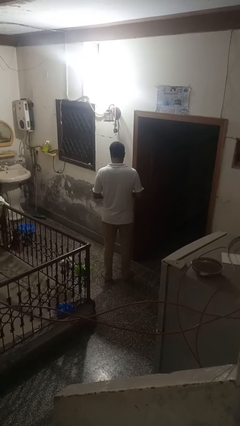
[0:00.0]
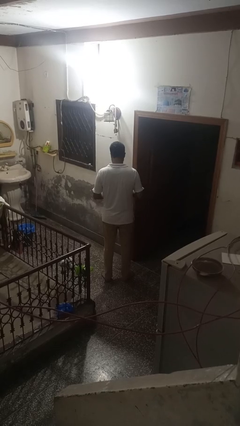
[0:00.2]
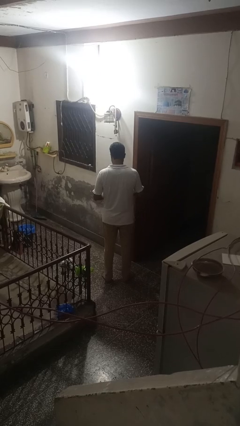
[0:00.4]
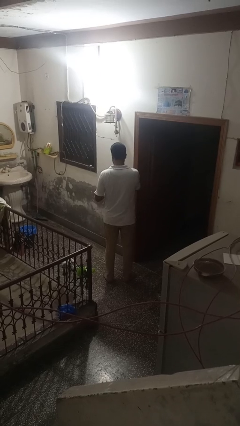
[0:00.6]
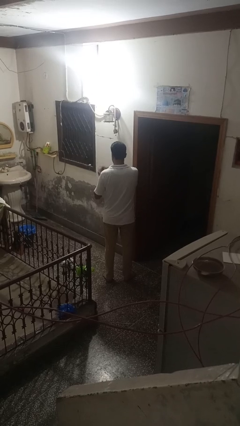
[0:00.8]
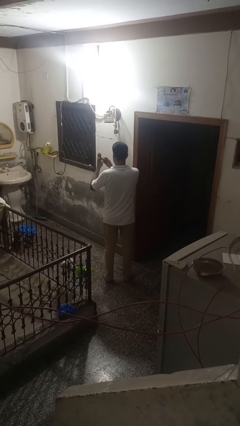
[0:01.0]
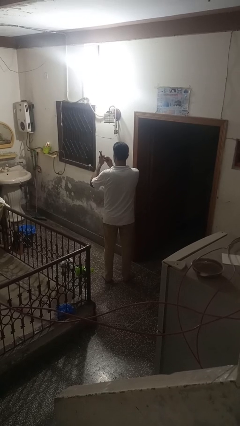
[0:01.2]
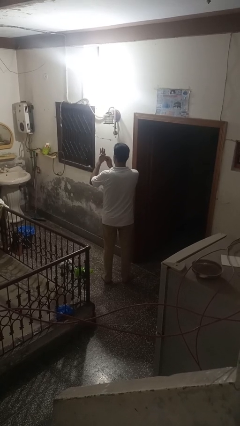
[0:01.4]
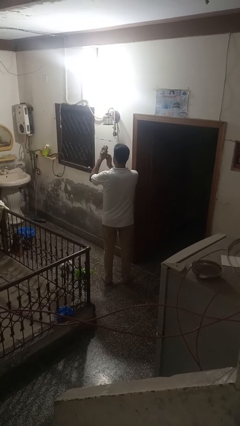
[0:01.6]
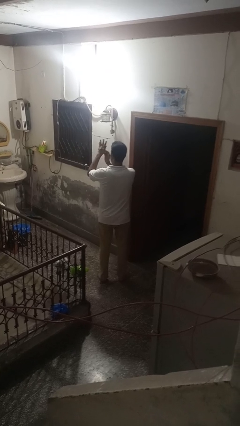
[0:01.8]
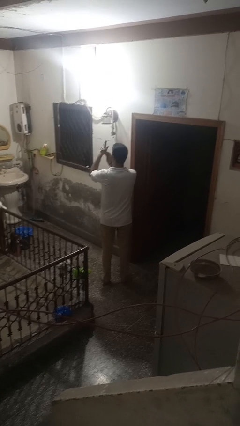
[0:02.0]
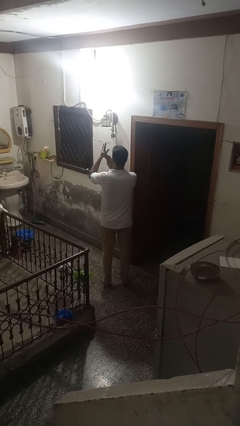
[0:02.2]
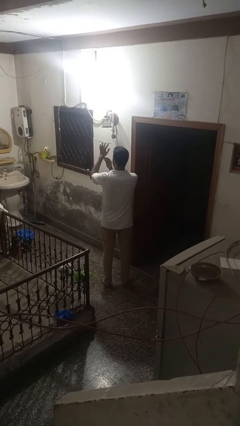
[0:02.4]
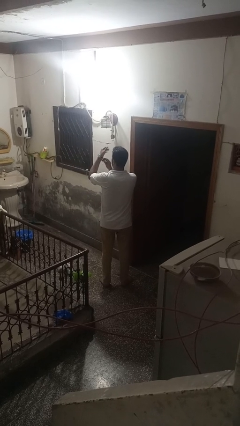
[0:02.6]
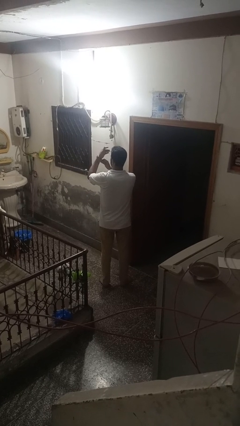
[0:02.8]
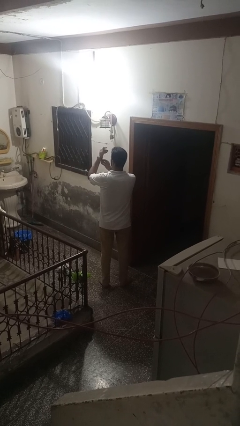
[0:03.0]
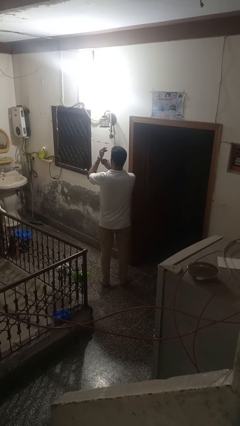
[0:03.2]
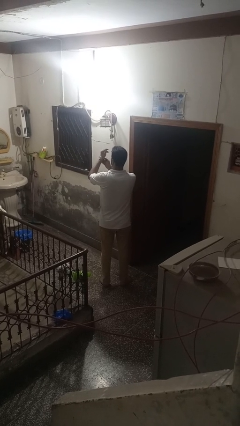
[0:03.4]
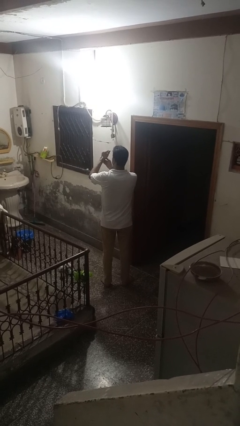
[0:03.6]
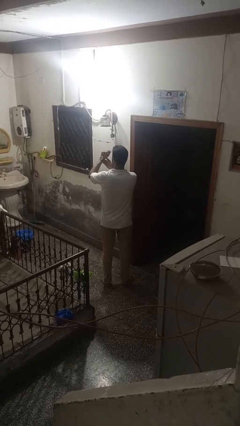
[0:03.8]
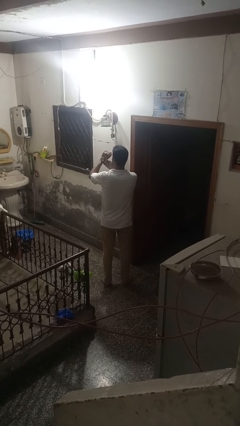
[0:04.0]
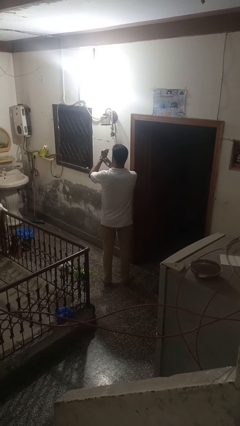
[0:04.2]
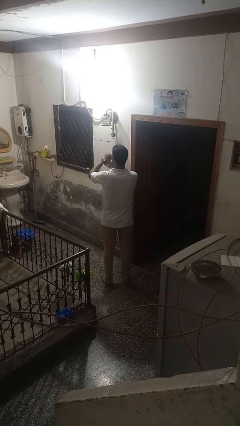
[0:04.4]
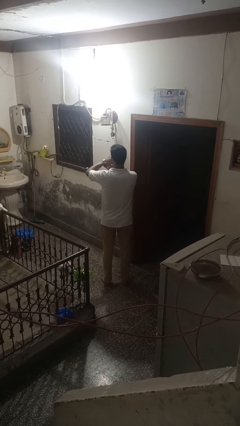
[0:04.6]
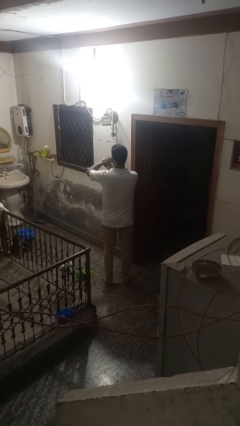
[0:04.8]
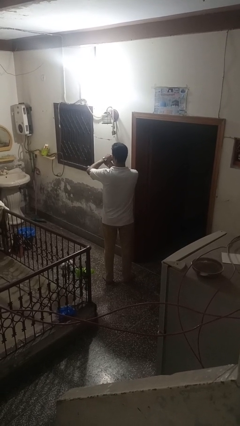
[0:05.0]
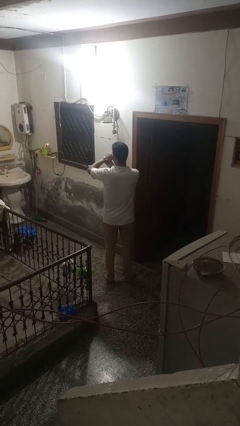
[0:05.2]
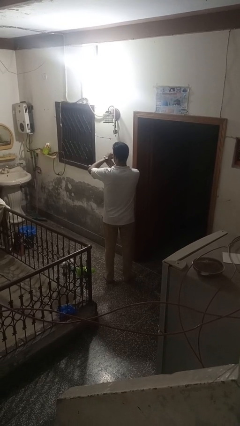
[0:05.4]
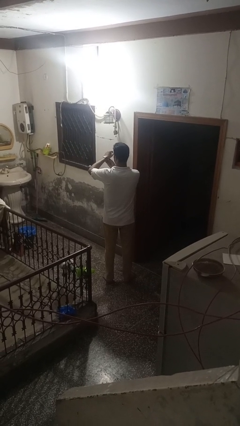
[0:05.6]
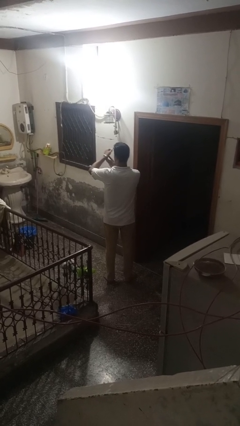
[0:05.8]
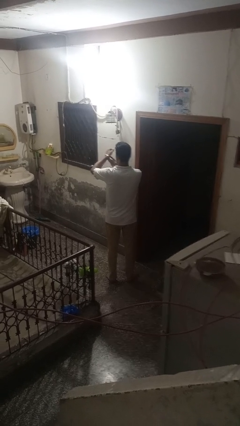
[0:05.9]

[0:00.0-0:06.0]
person puts on wristwatch

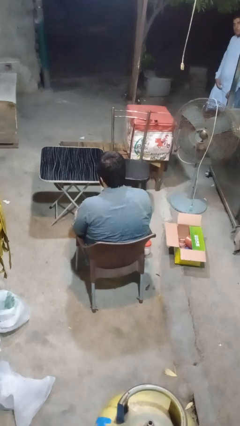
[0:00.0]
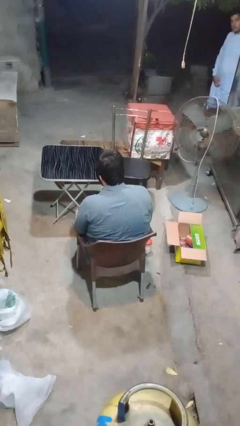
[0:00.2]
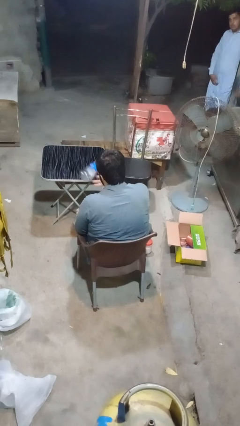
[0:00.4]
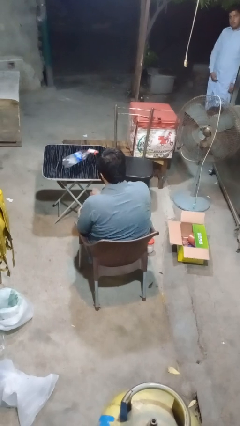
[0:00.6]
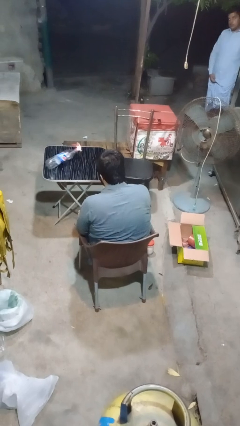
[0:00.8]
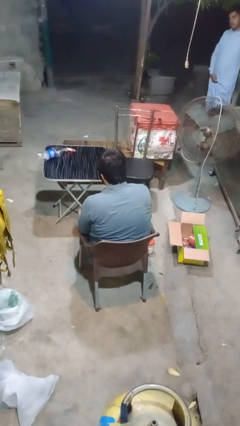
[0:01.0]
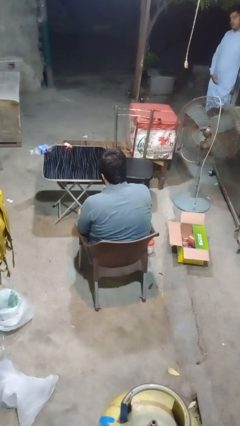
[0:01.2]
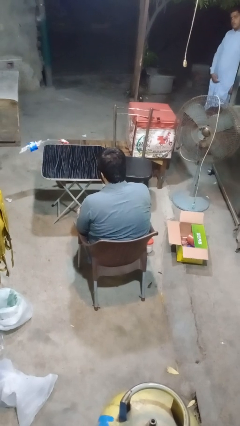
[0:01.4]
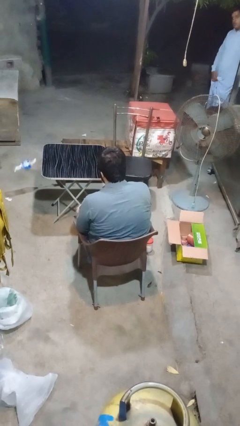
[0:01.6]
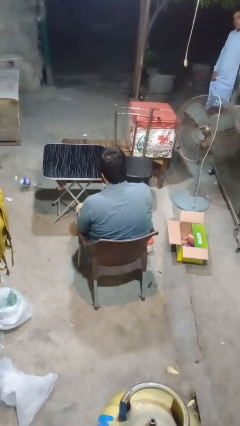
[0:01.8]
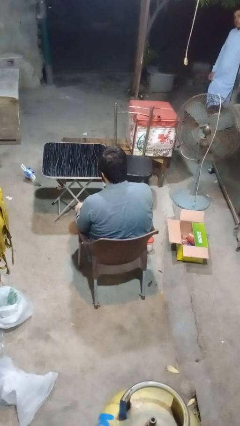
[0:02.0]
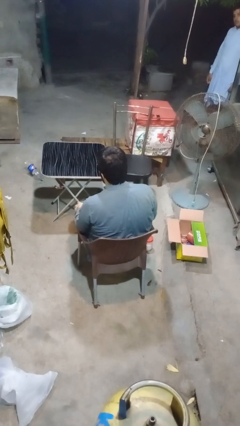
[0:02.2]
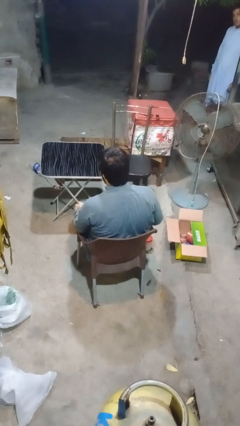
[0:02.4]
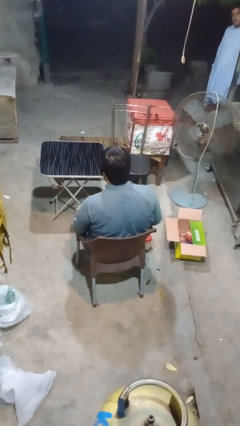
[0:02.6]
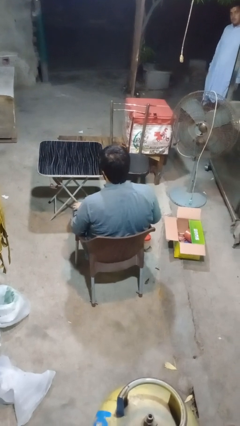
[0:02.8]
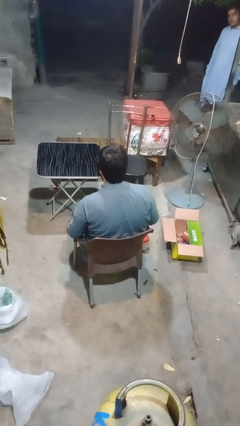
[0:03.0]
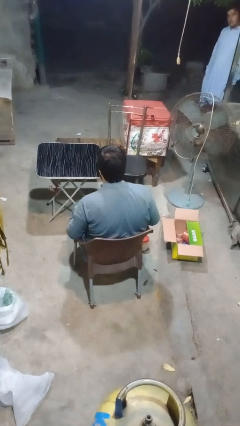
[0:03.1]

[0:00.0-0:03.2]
person throws object on table

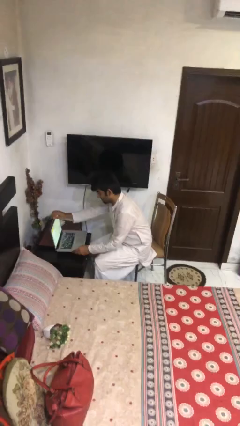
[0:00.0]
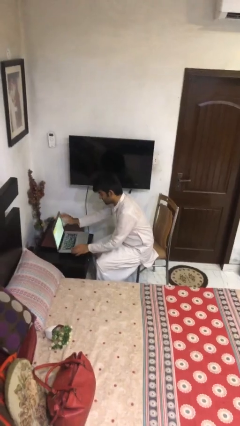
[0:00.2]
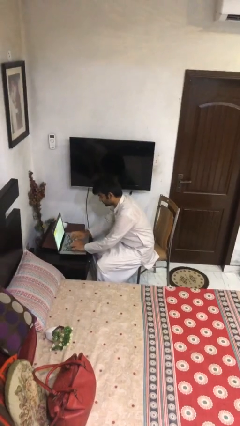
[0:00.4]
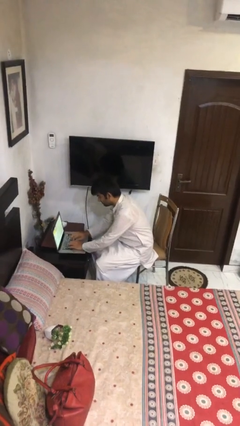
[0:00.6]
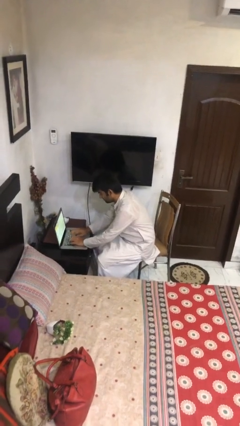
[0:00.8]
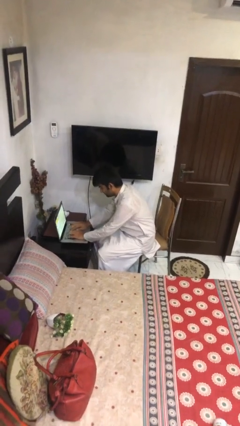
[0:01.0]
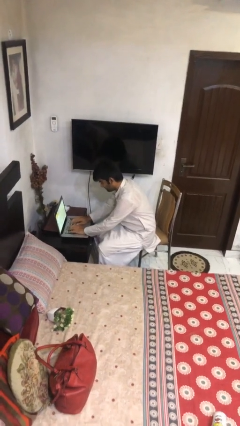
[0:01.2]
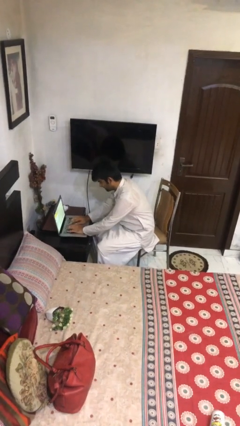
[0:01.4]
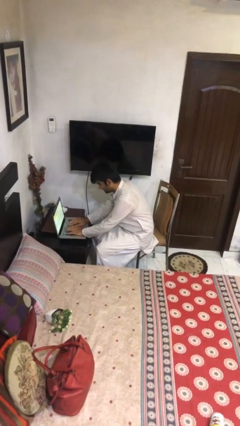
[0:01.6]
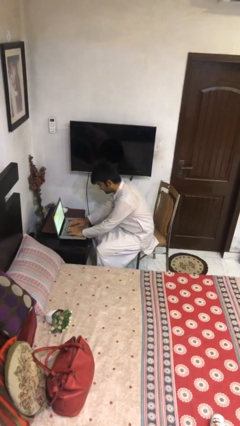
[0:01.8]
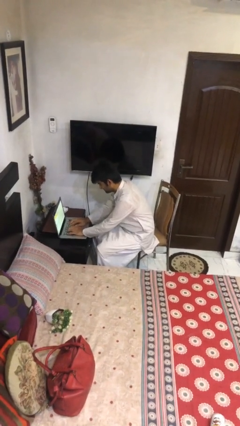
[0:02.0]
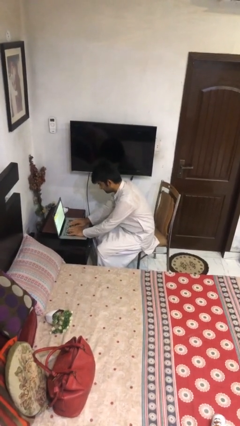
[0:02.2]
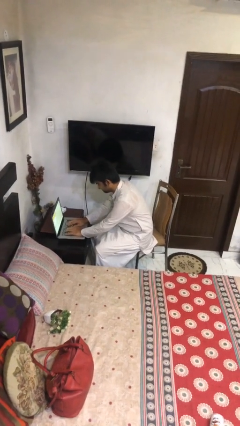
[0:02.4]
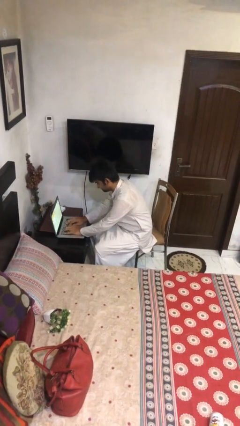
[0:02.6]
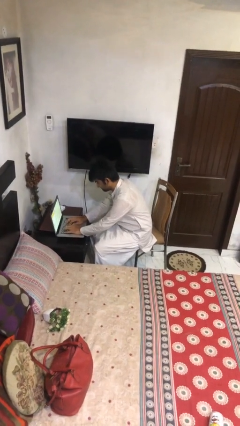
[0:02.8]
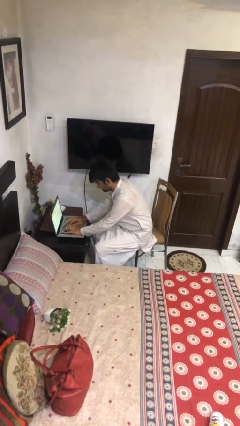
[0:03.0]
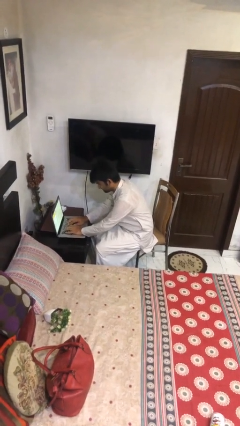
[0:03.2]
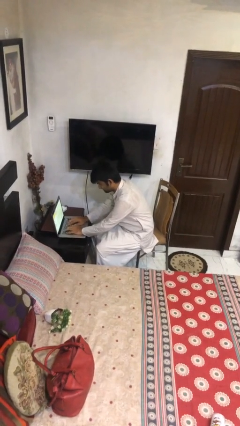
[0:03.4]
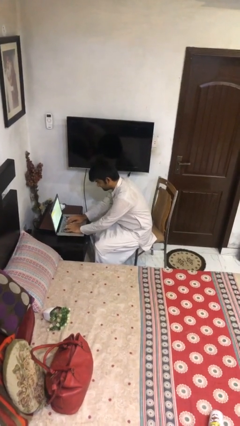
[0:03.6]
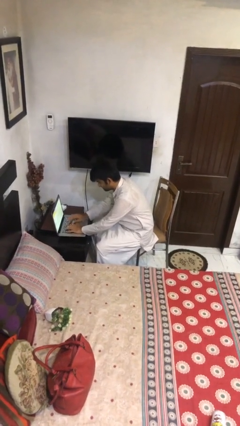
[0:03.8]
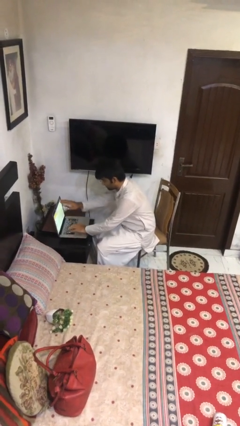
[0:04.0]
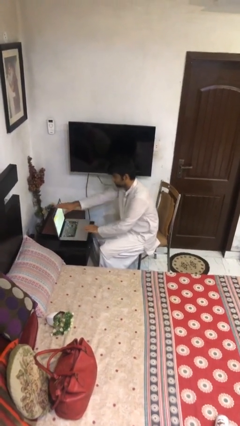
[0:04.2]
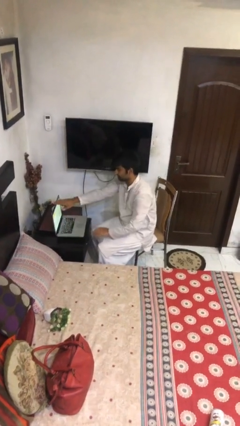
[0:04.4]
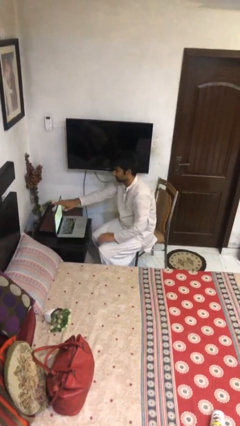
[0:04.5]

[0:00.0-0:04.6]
person interacts with laptop

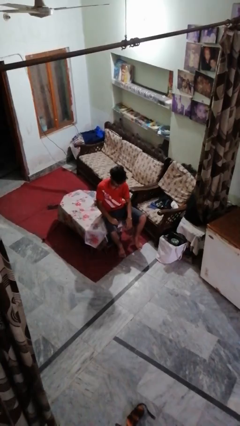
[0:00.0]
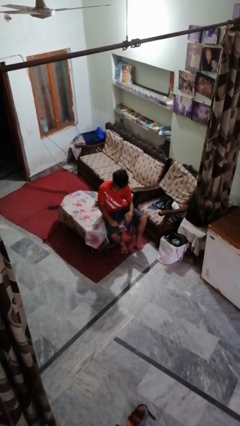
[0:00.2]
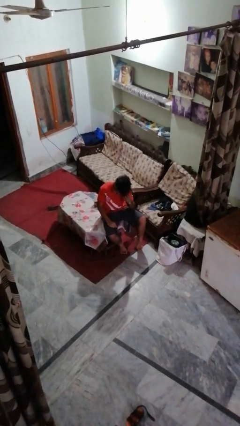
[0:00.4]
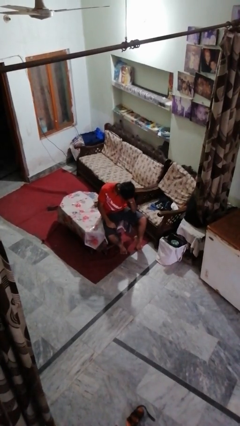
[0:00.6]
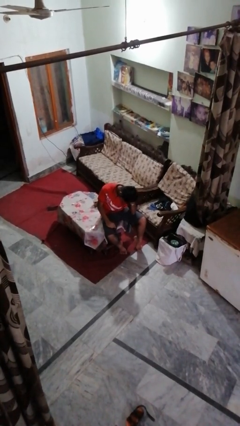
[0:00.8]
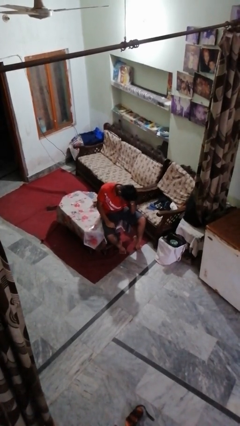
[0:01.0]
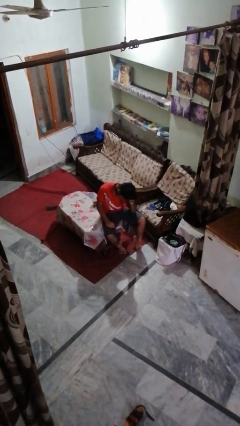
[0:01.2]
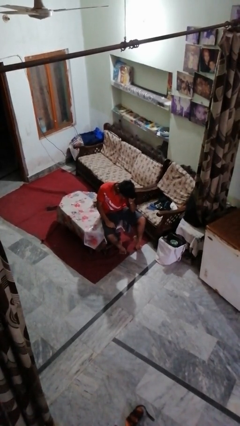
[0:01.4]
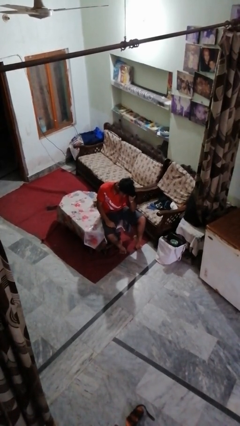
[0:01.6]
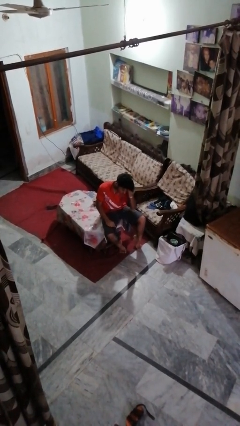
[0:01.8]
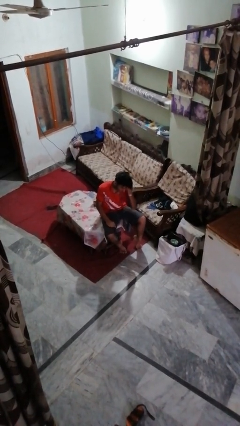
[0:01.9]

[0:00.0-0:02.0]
person strokes hair

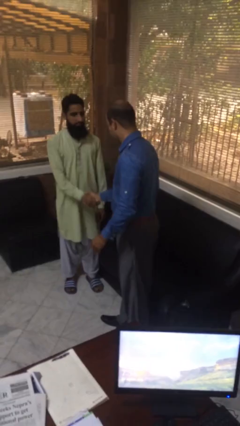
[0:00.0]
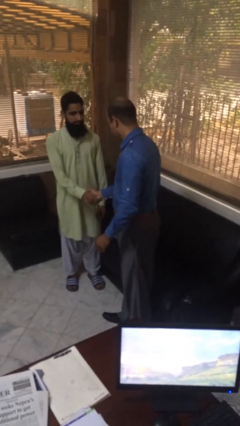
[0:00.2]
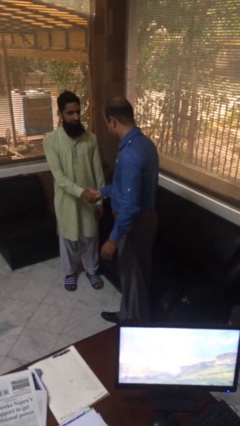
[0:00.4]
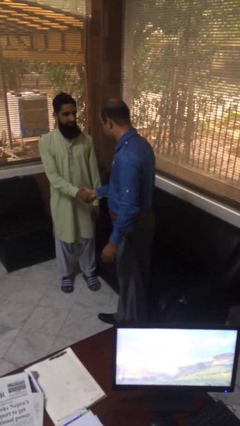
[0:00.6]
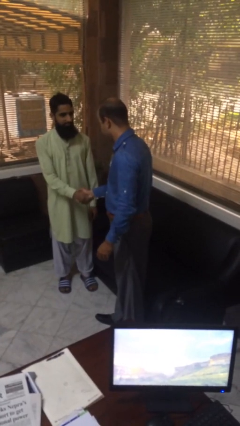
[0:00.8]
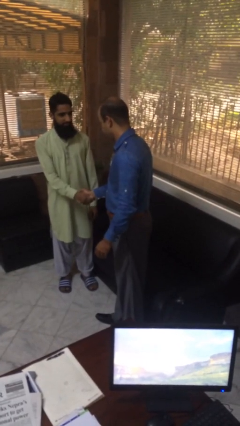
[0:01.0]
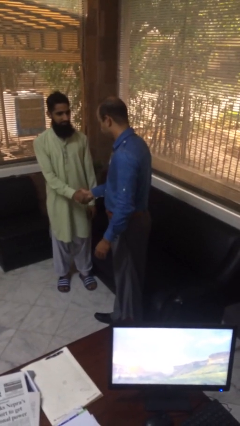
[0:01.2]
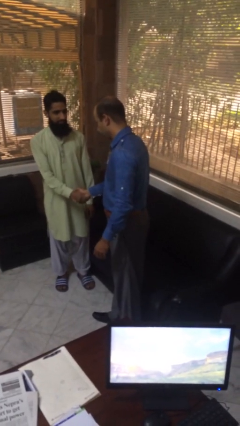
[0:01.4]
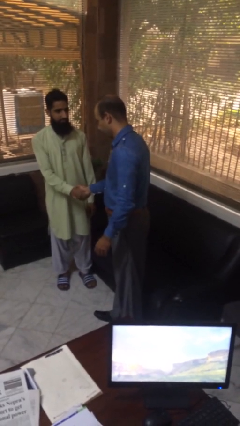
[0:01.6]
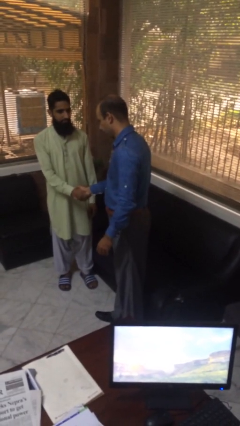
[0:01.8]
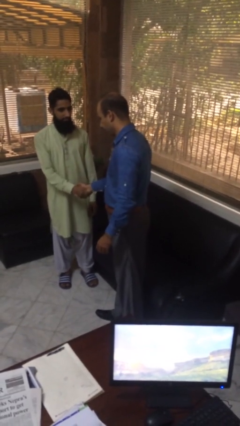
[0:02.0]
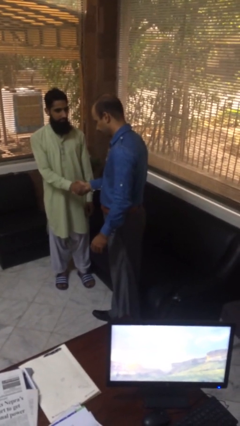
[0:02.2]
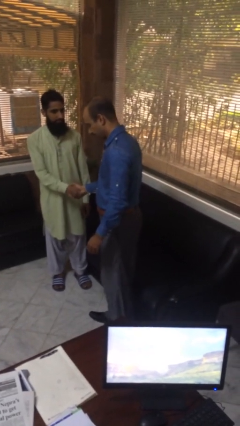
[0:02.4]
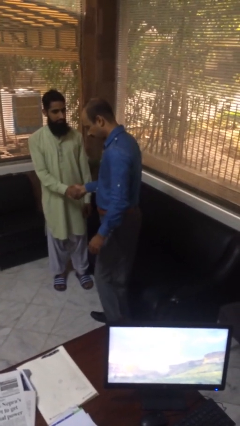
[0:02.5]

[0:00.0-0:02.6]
person shakes hand
